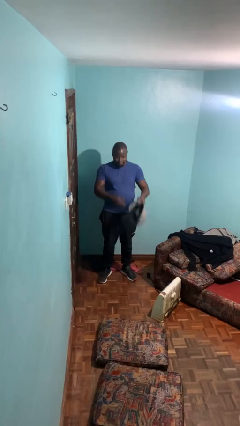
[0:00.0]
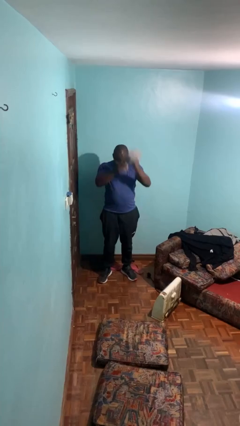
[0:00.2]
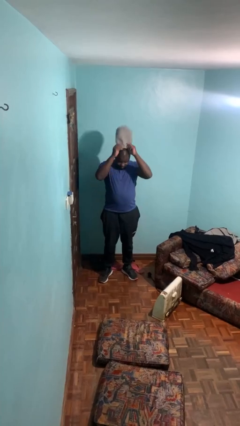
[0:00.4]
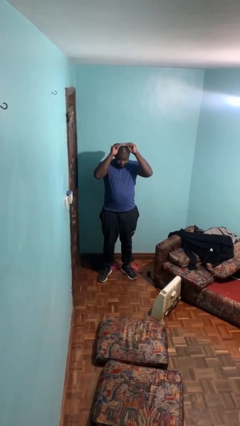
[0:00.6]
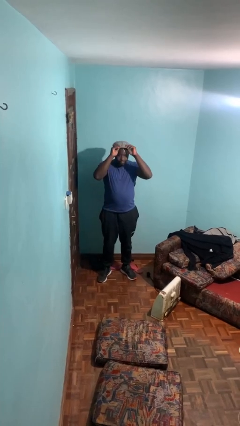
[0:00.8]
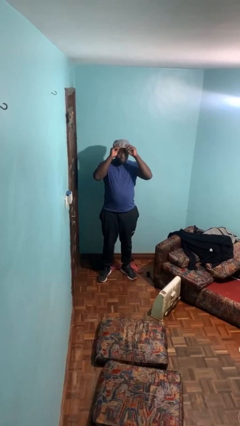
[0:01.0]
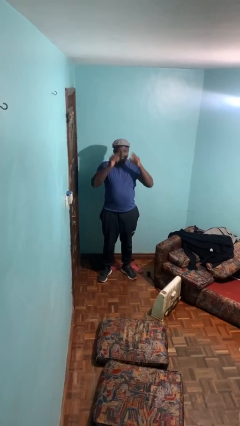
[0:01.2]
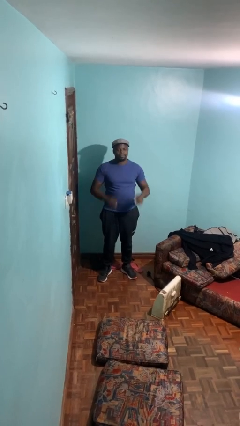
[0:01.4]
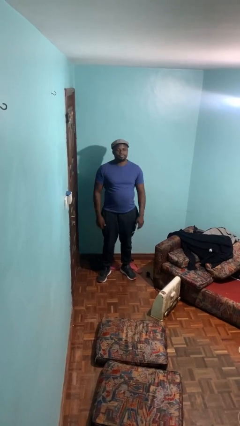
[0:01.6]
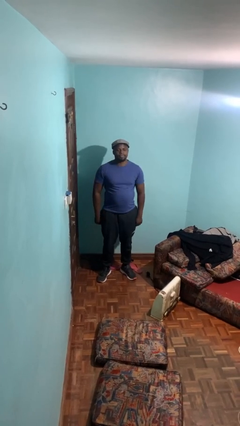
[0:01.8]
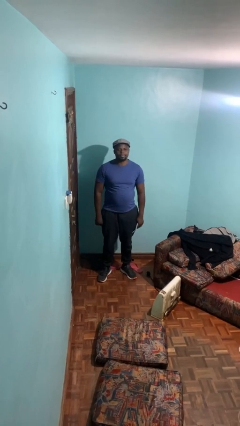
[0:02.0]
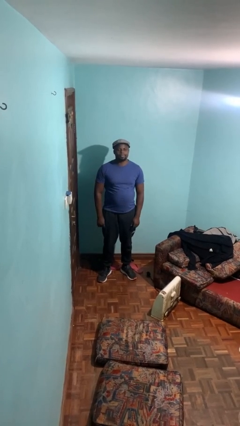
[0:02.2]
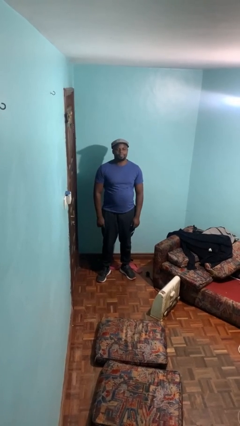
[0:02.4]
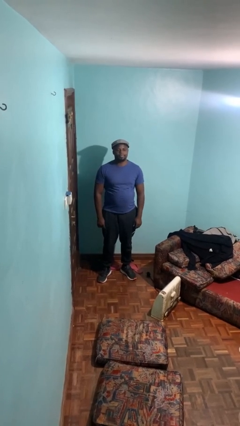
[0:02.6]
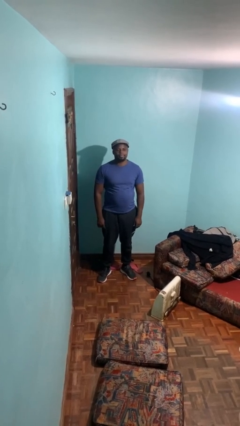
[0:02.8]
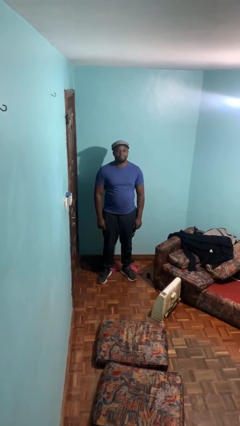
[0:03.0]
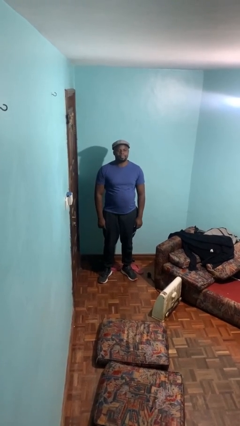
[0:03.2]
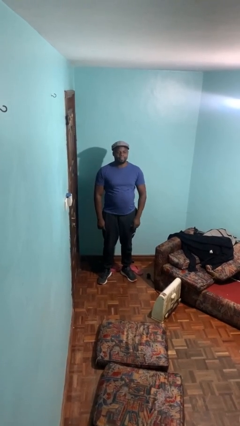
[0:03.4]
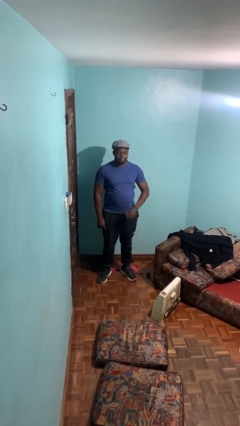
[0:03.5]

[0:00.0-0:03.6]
person puts on hat

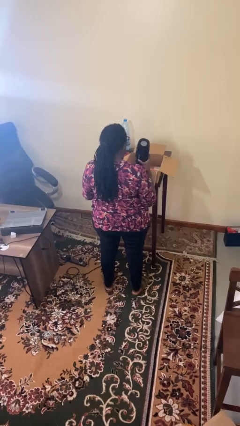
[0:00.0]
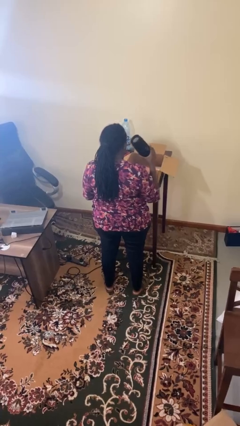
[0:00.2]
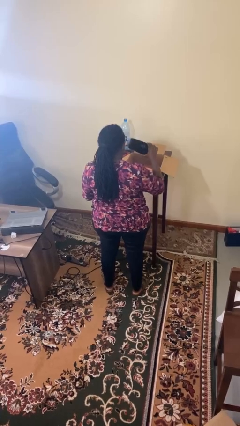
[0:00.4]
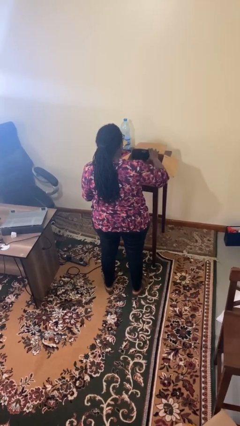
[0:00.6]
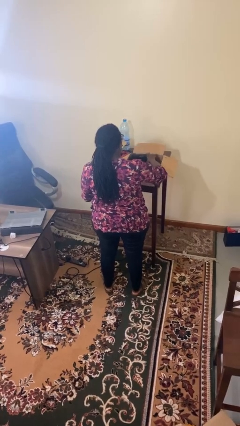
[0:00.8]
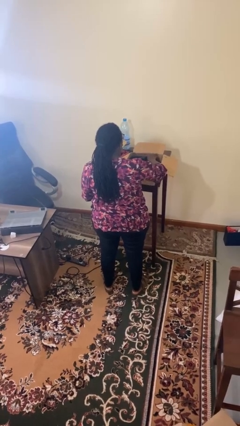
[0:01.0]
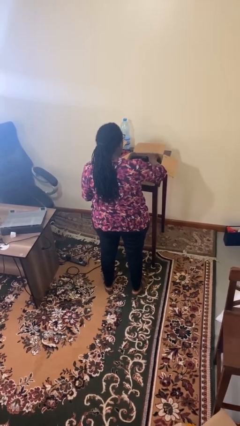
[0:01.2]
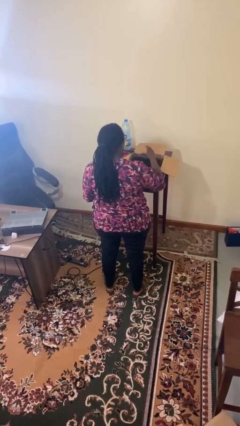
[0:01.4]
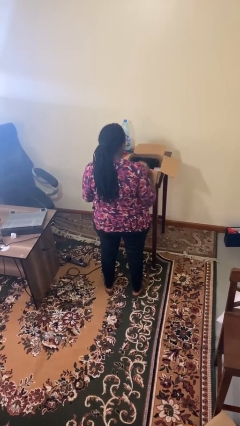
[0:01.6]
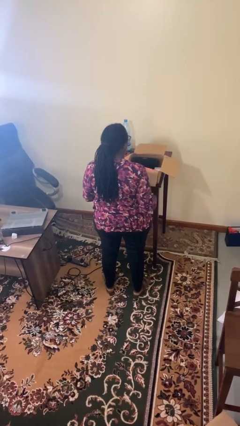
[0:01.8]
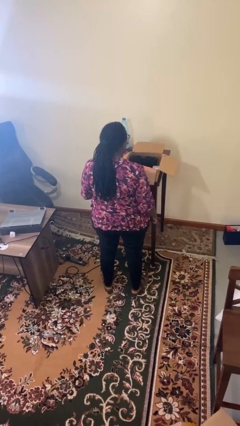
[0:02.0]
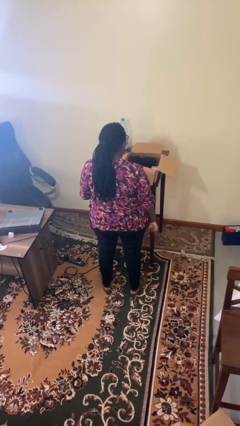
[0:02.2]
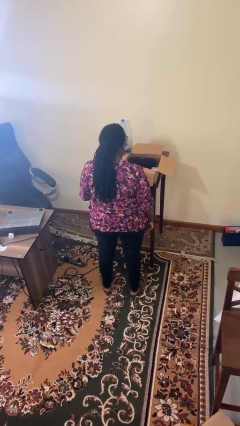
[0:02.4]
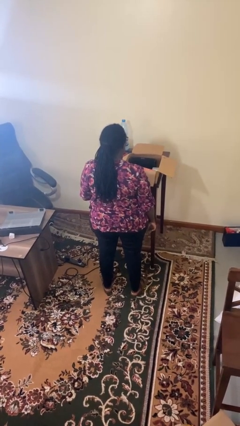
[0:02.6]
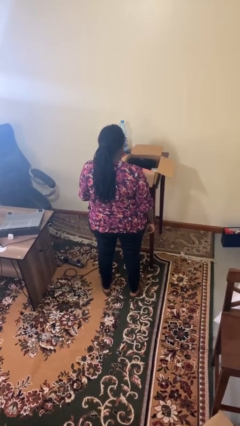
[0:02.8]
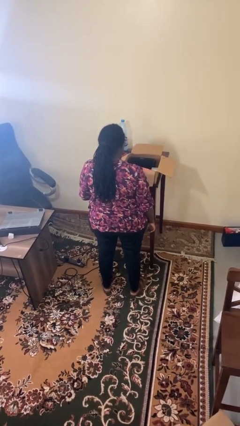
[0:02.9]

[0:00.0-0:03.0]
person puts object into box

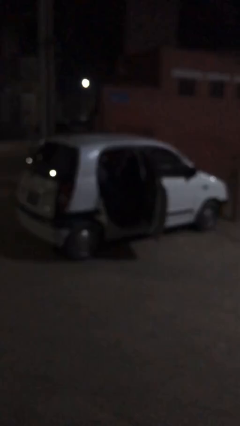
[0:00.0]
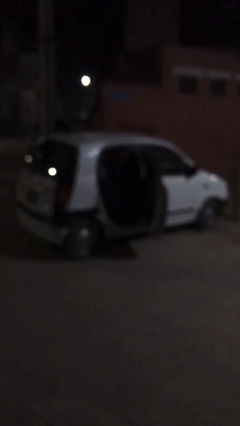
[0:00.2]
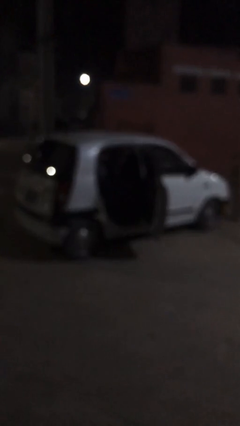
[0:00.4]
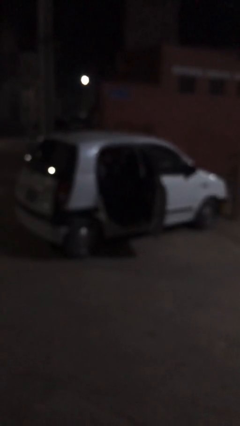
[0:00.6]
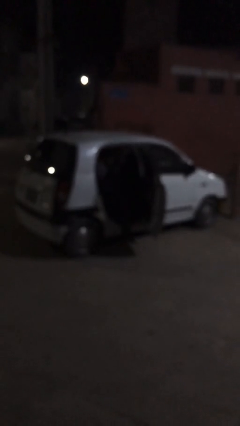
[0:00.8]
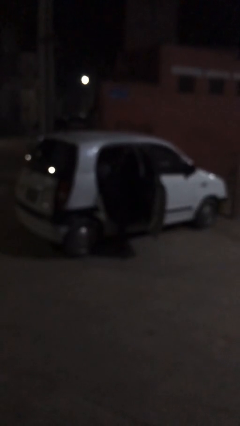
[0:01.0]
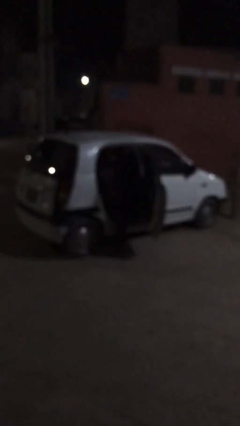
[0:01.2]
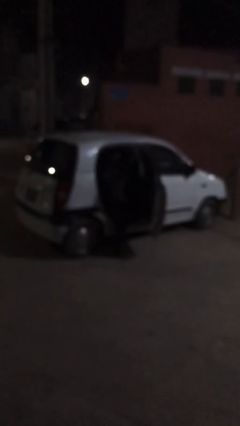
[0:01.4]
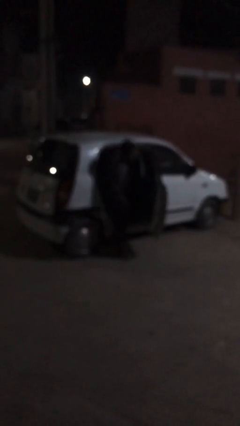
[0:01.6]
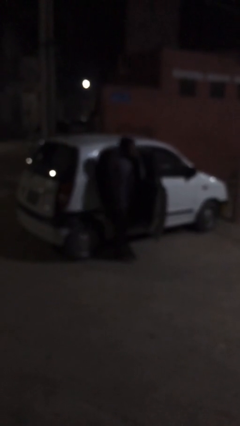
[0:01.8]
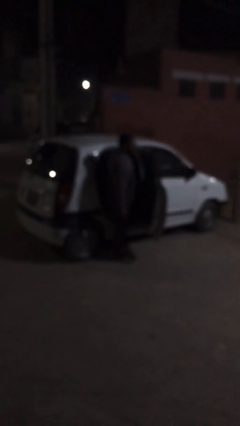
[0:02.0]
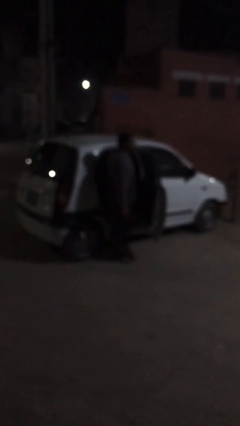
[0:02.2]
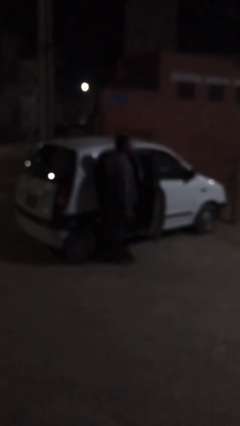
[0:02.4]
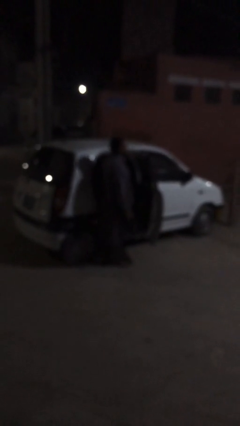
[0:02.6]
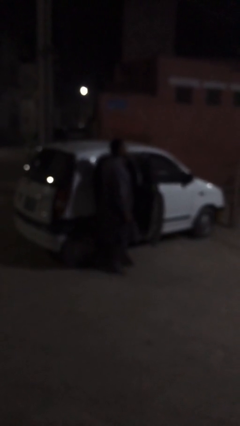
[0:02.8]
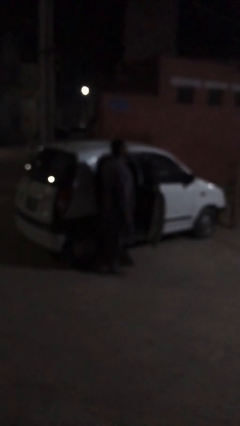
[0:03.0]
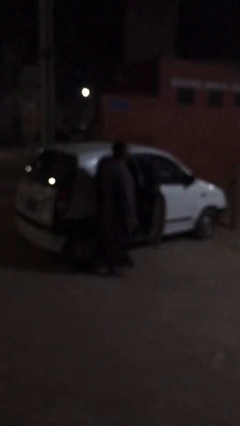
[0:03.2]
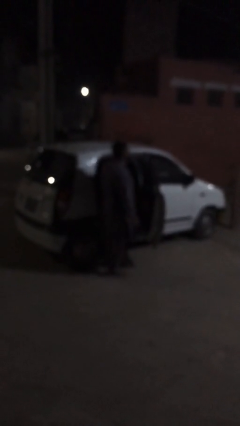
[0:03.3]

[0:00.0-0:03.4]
person exits car

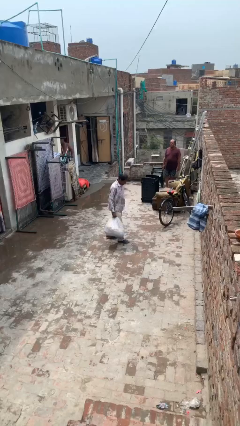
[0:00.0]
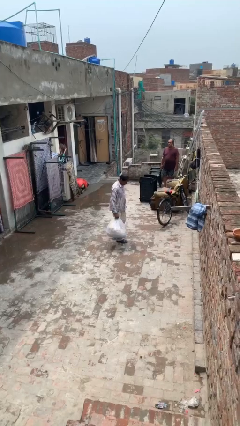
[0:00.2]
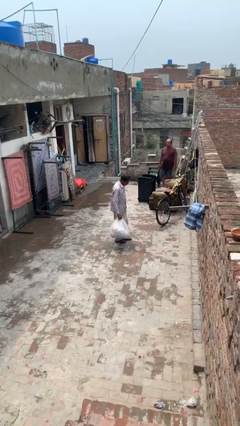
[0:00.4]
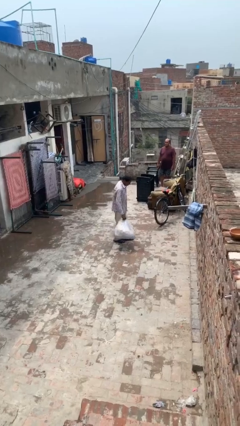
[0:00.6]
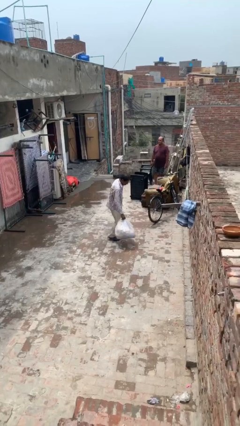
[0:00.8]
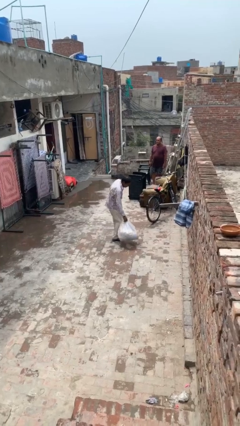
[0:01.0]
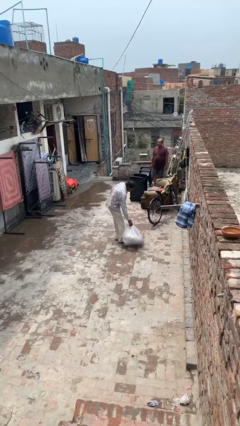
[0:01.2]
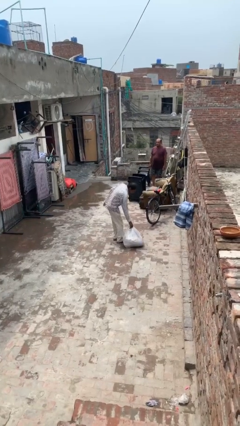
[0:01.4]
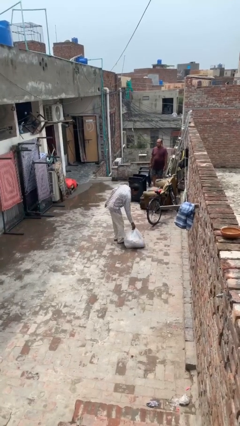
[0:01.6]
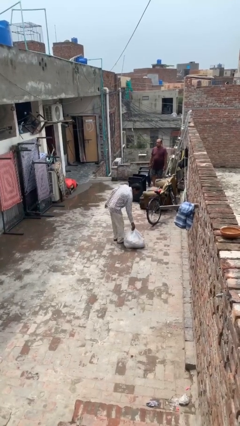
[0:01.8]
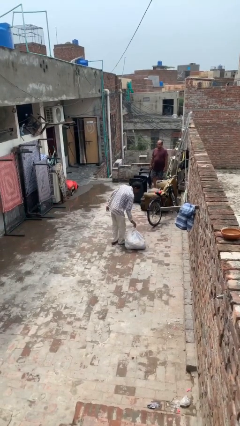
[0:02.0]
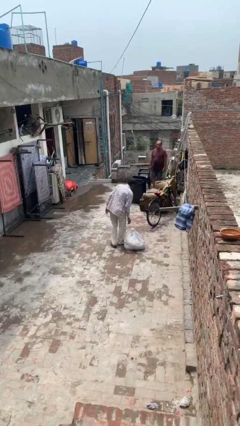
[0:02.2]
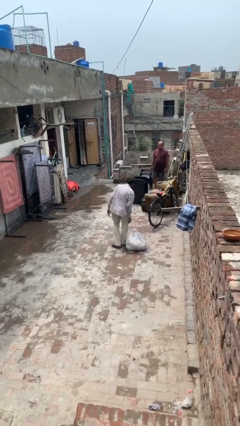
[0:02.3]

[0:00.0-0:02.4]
person puts down object on floor

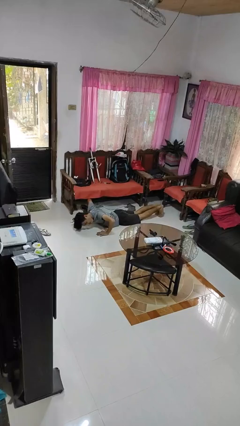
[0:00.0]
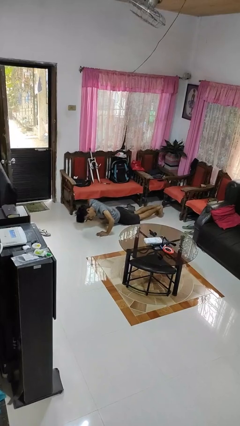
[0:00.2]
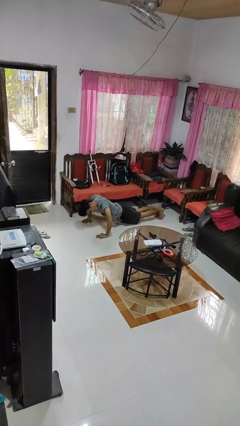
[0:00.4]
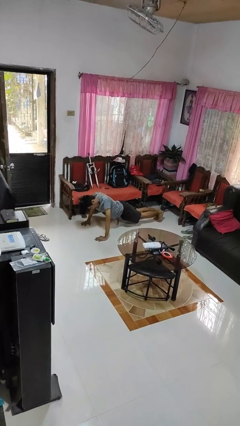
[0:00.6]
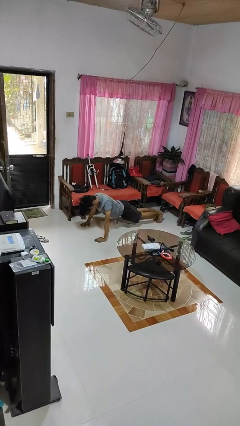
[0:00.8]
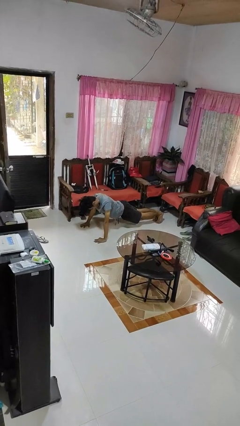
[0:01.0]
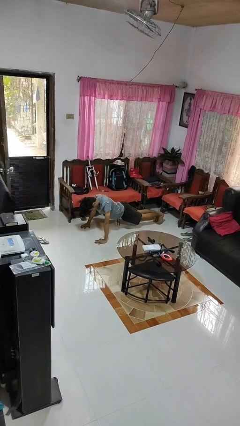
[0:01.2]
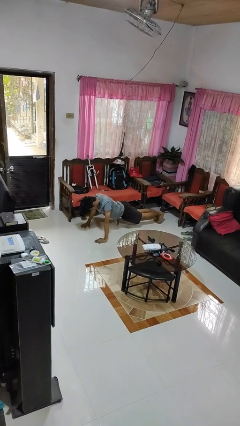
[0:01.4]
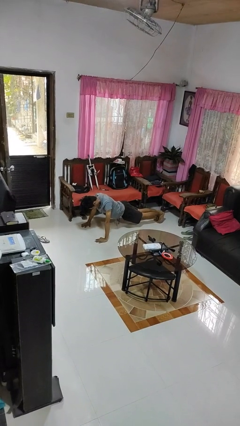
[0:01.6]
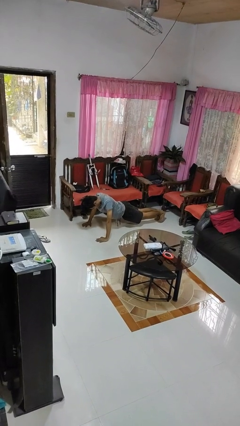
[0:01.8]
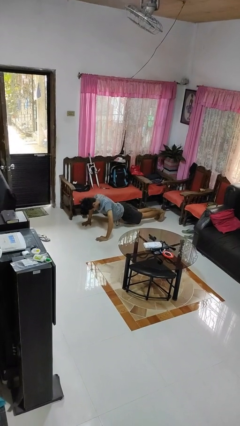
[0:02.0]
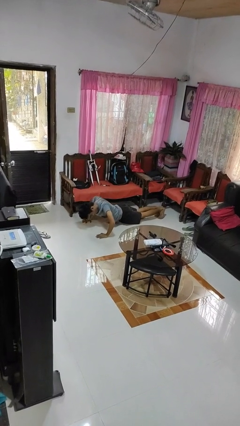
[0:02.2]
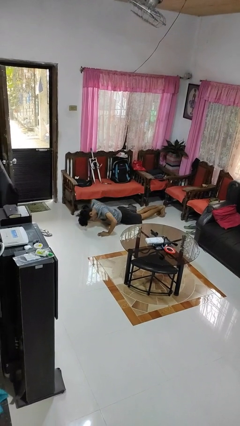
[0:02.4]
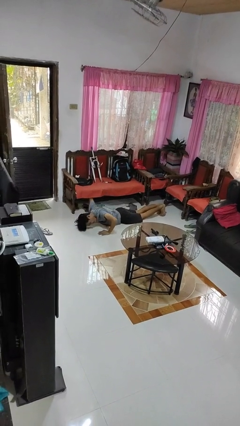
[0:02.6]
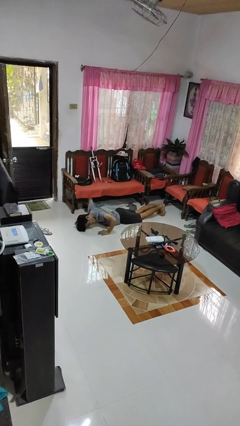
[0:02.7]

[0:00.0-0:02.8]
person exercises with pushup

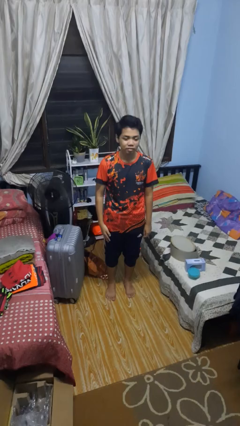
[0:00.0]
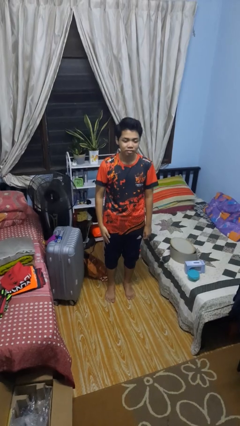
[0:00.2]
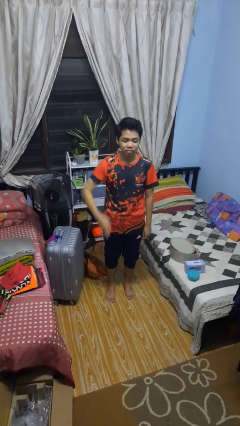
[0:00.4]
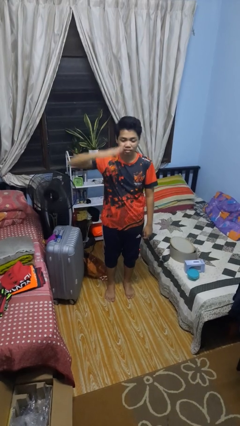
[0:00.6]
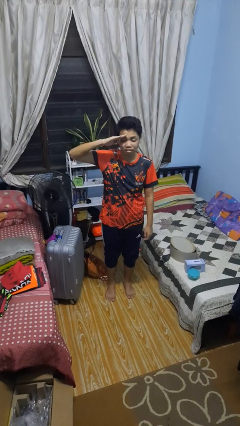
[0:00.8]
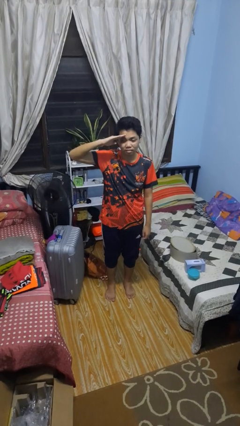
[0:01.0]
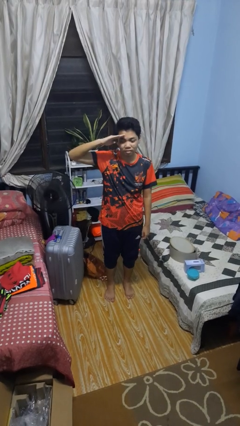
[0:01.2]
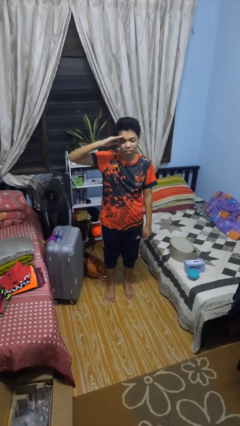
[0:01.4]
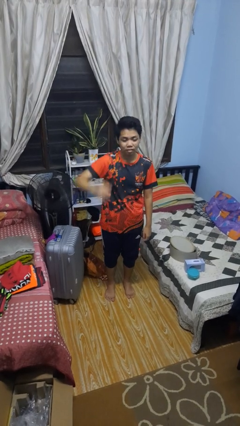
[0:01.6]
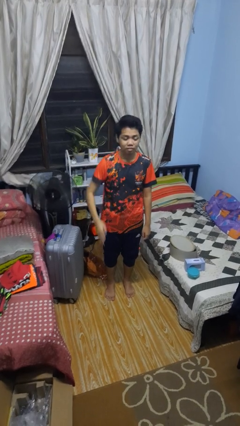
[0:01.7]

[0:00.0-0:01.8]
person salutes
